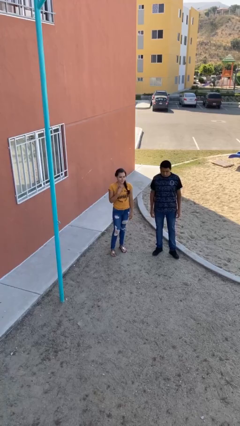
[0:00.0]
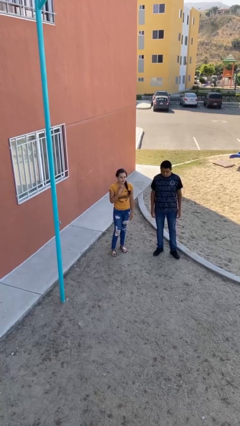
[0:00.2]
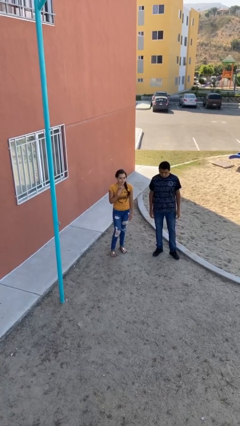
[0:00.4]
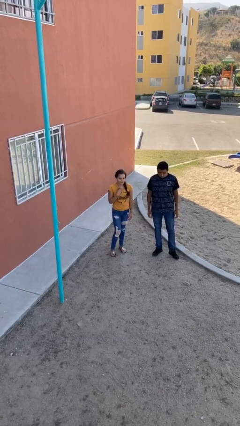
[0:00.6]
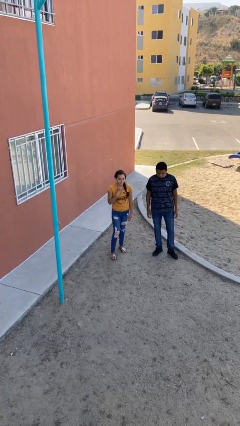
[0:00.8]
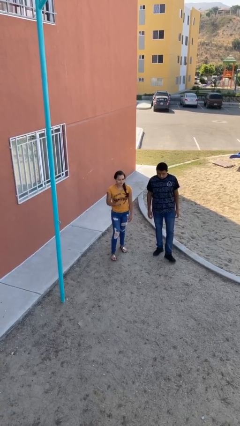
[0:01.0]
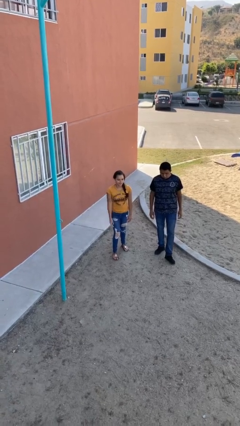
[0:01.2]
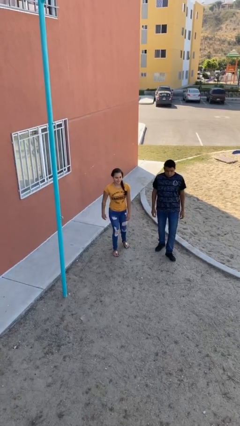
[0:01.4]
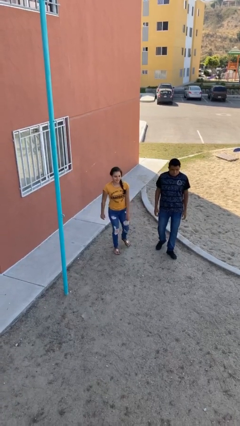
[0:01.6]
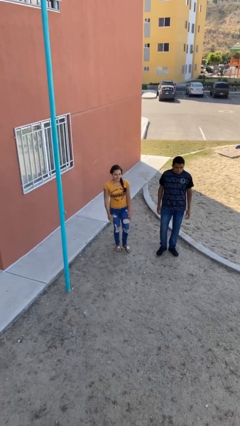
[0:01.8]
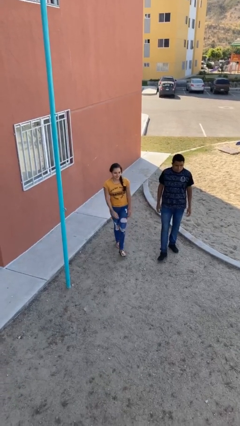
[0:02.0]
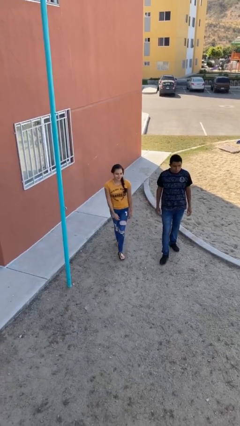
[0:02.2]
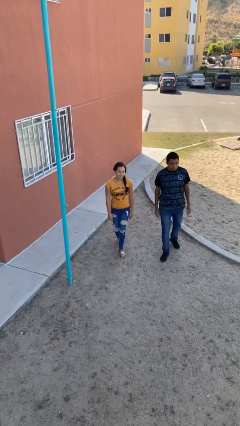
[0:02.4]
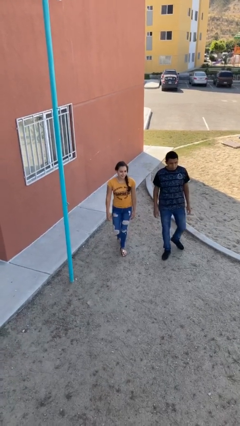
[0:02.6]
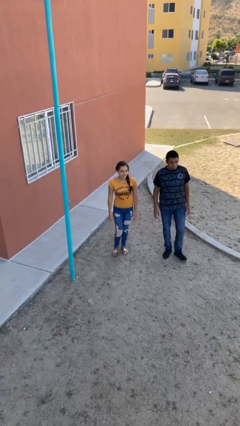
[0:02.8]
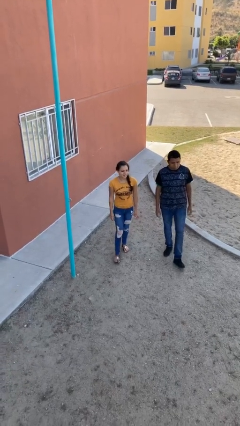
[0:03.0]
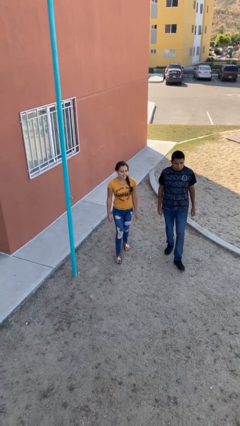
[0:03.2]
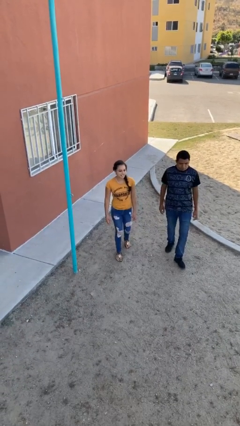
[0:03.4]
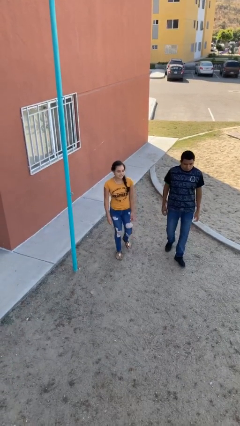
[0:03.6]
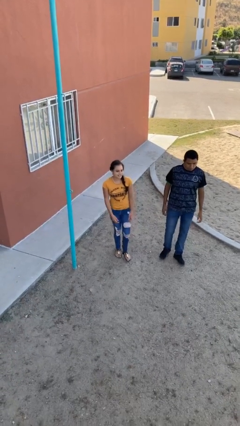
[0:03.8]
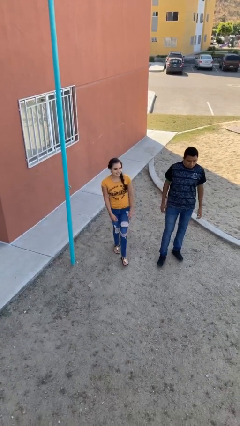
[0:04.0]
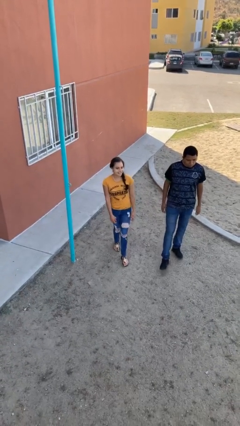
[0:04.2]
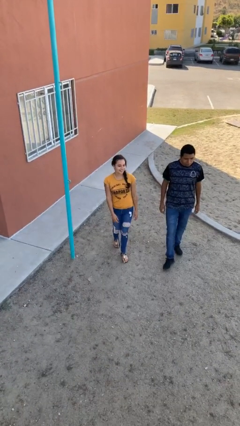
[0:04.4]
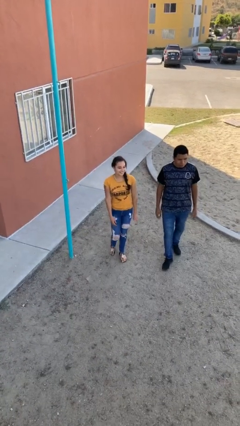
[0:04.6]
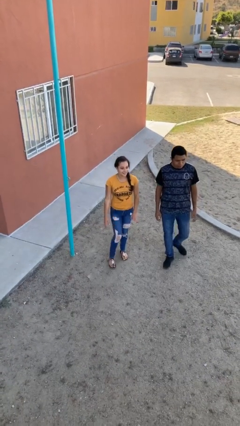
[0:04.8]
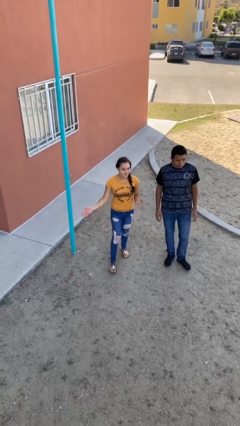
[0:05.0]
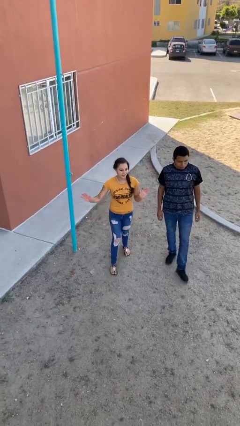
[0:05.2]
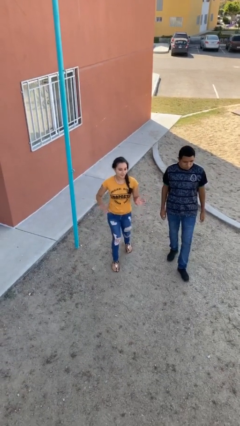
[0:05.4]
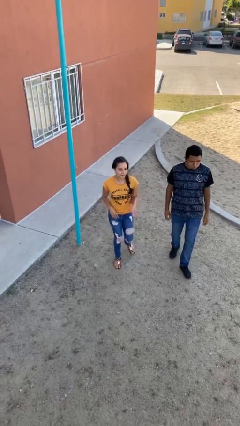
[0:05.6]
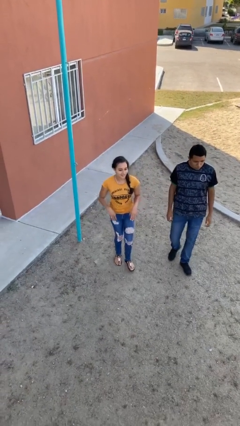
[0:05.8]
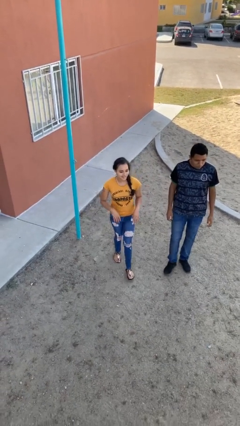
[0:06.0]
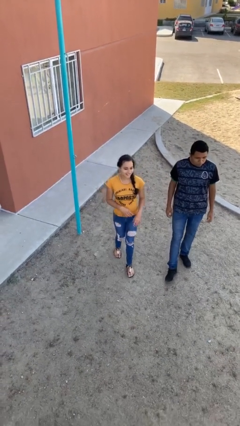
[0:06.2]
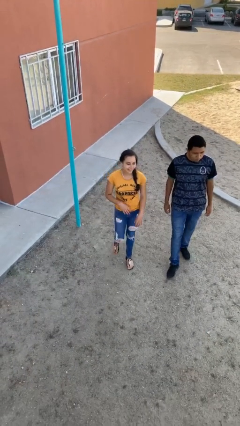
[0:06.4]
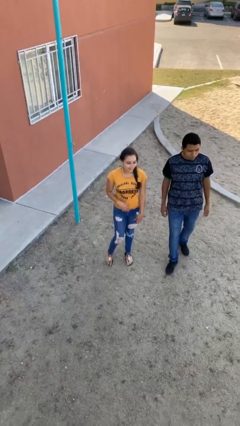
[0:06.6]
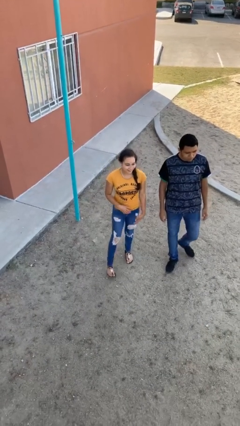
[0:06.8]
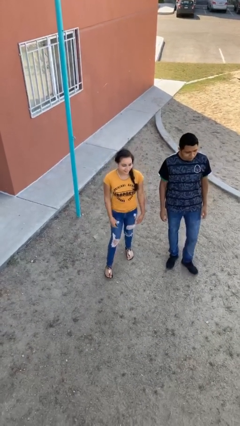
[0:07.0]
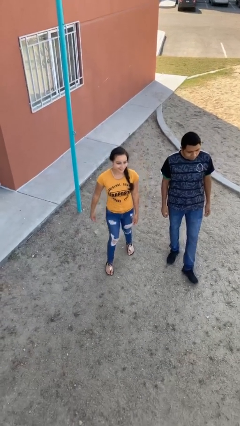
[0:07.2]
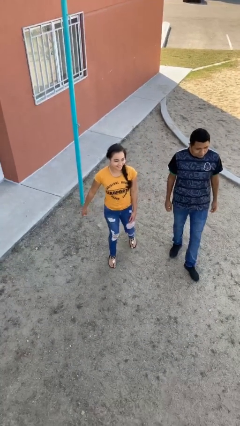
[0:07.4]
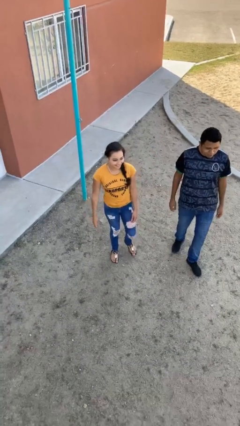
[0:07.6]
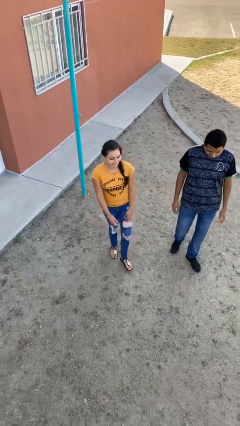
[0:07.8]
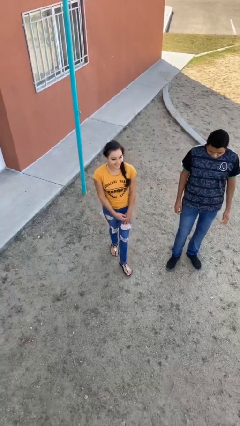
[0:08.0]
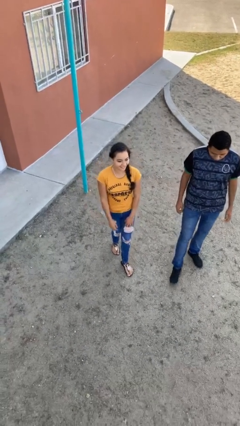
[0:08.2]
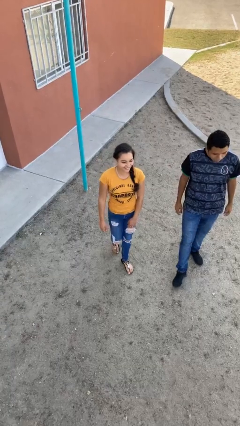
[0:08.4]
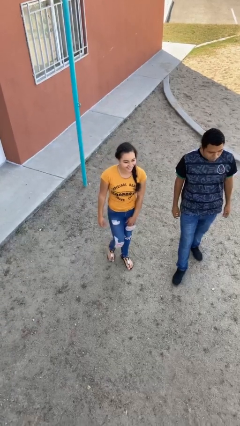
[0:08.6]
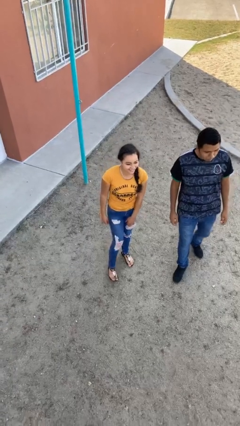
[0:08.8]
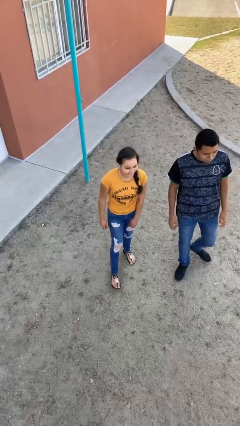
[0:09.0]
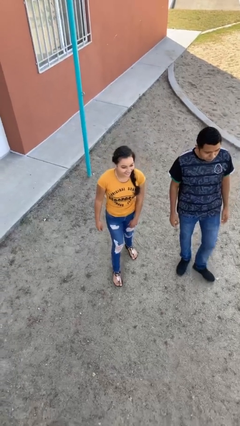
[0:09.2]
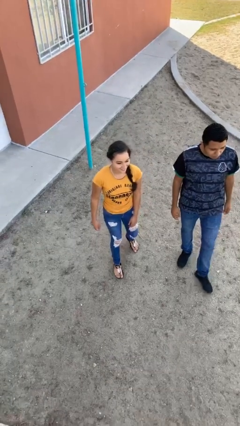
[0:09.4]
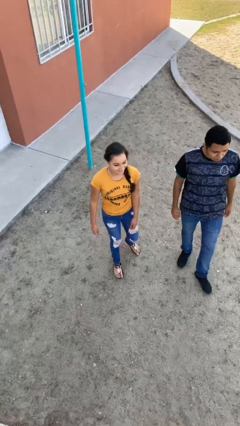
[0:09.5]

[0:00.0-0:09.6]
person talks to person

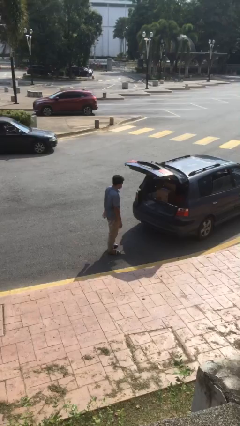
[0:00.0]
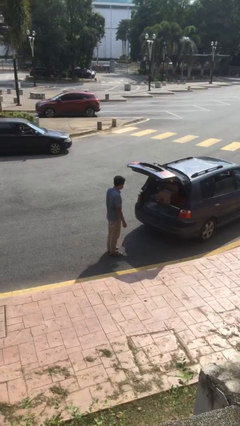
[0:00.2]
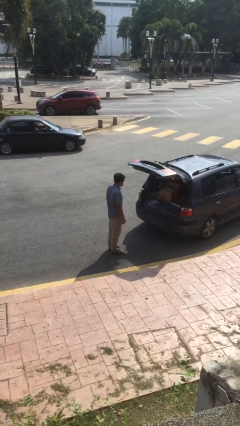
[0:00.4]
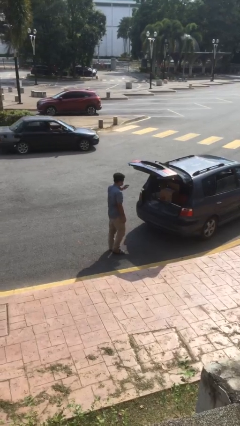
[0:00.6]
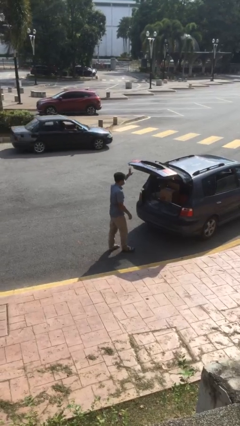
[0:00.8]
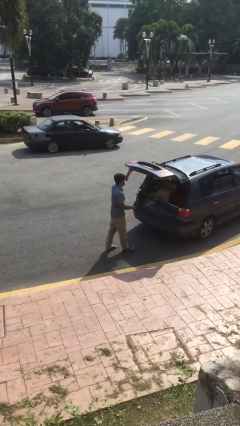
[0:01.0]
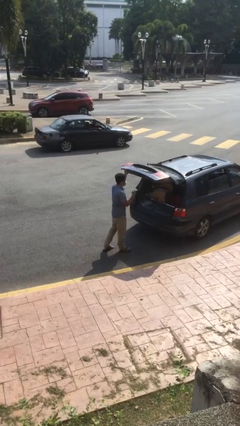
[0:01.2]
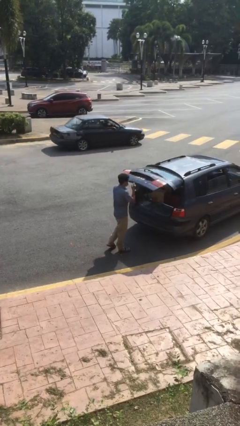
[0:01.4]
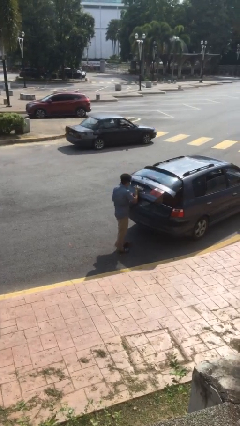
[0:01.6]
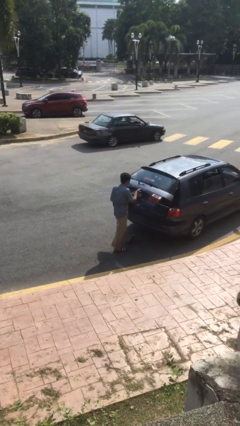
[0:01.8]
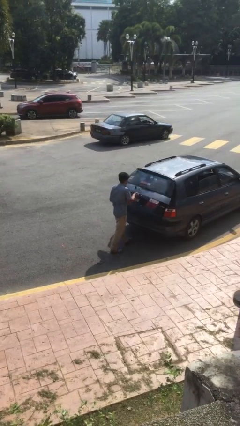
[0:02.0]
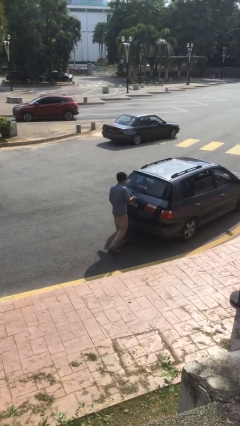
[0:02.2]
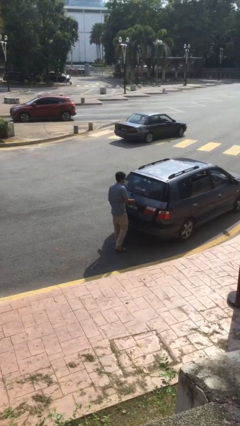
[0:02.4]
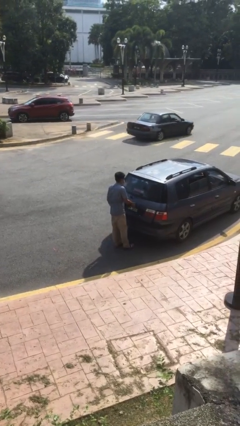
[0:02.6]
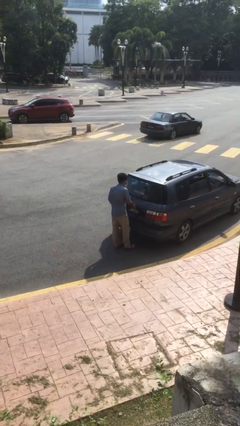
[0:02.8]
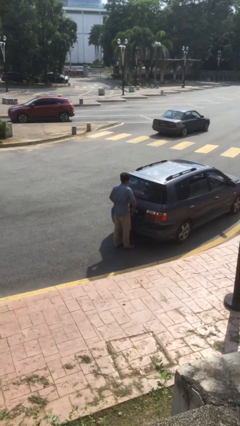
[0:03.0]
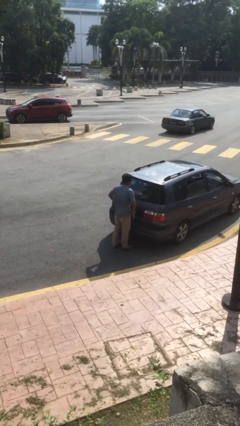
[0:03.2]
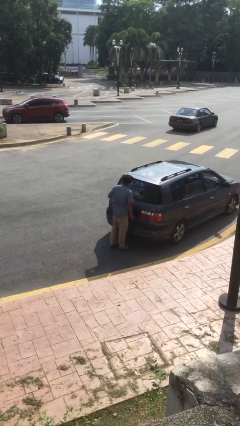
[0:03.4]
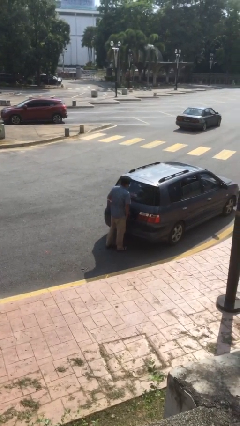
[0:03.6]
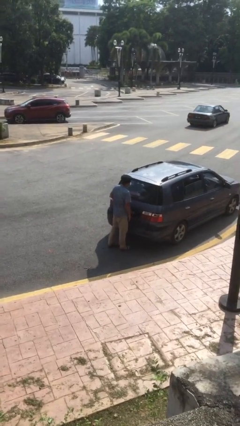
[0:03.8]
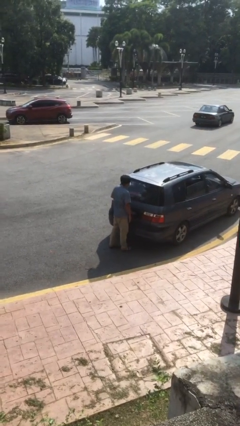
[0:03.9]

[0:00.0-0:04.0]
person closes car trunk

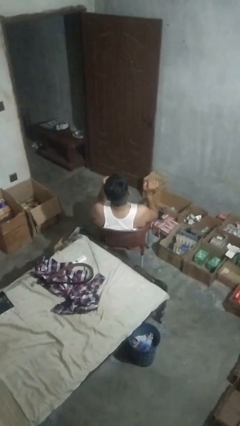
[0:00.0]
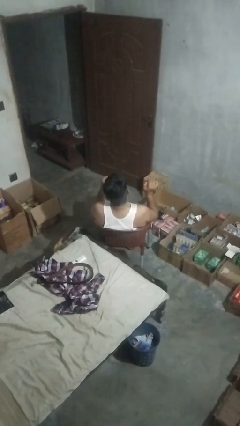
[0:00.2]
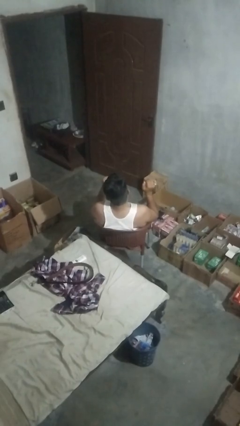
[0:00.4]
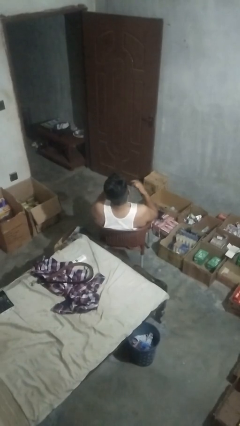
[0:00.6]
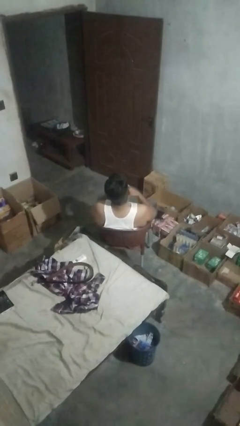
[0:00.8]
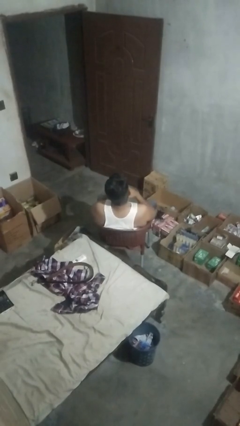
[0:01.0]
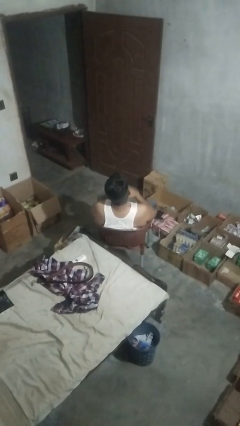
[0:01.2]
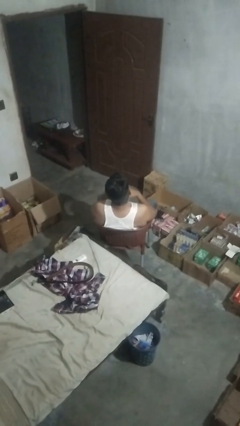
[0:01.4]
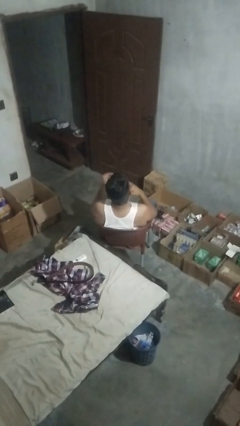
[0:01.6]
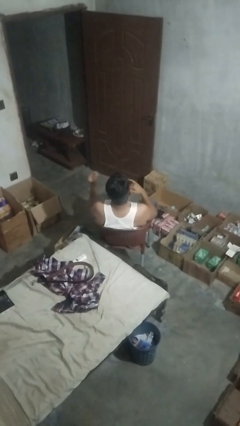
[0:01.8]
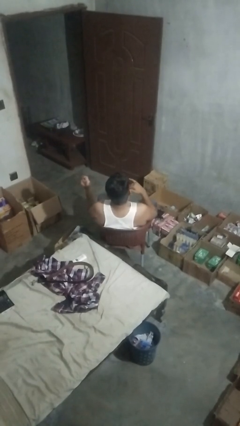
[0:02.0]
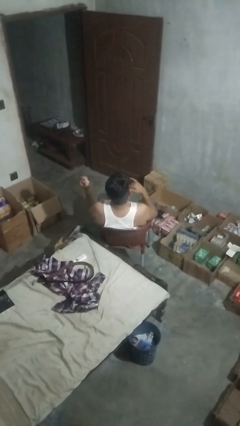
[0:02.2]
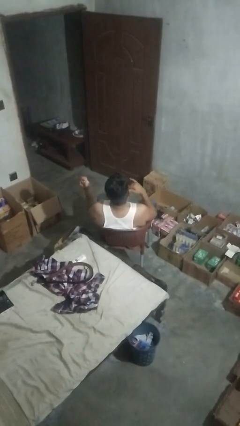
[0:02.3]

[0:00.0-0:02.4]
person takes off ring

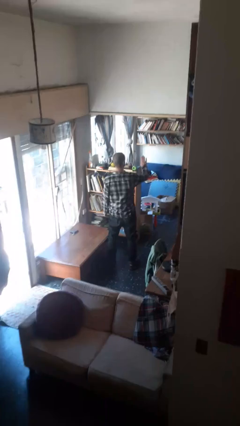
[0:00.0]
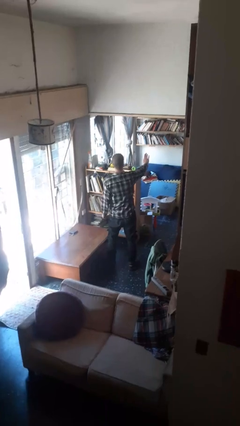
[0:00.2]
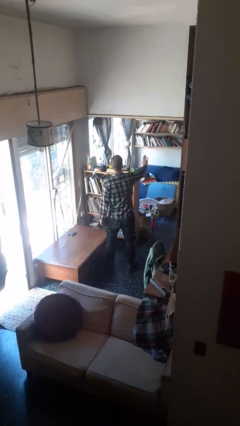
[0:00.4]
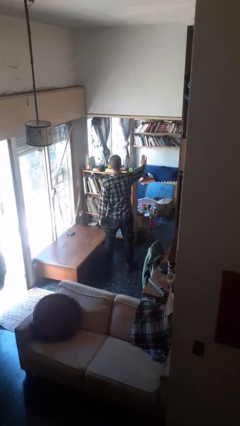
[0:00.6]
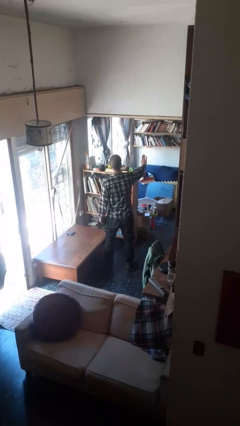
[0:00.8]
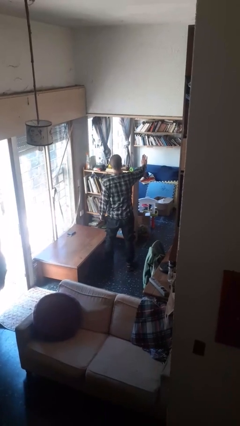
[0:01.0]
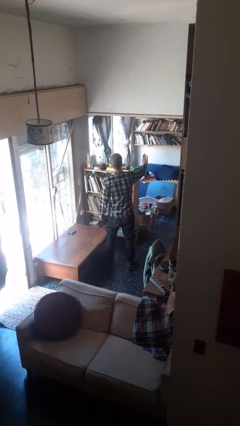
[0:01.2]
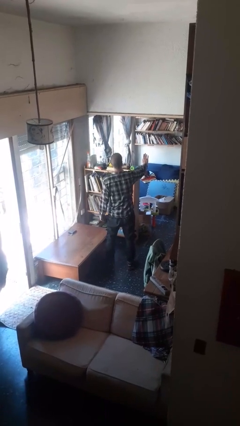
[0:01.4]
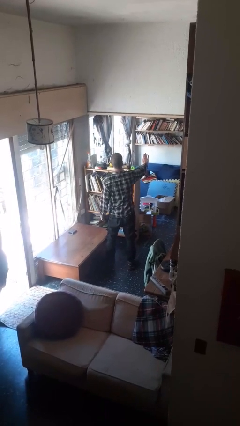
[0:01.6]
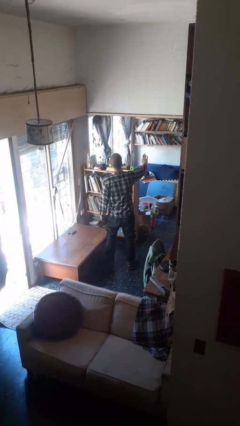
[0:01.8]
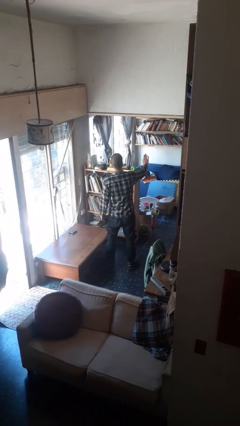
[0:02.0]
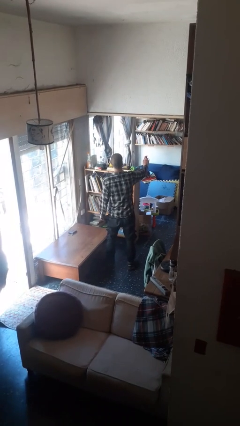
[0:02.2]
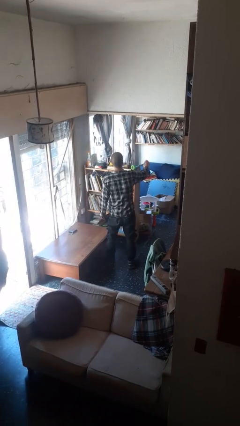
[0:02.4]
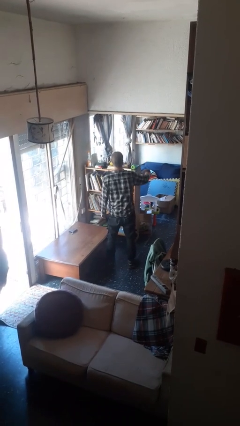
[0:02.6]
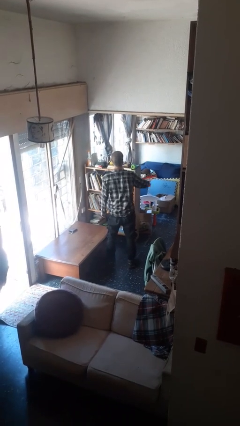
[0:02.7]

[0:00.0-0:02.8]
person gestures stop
